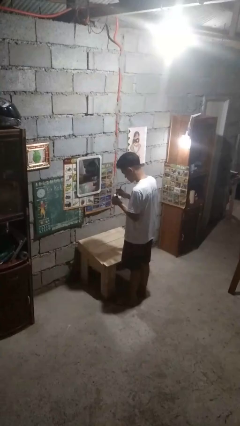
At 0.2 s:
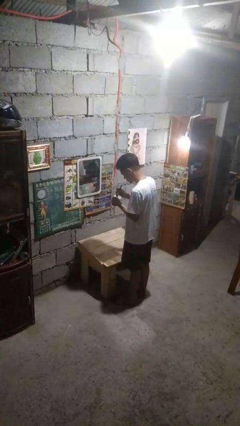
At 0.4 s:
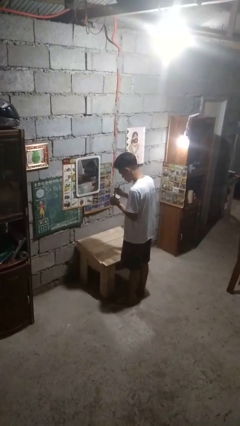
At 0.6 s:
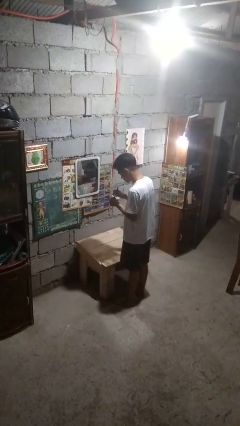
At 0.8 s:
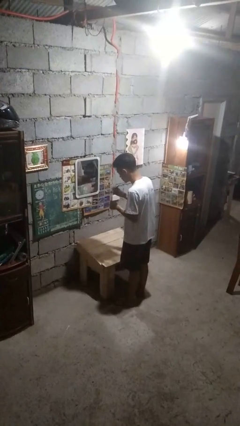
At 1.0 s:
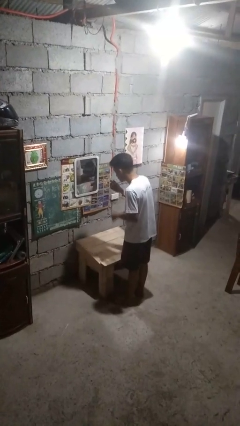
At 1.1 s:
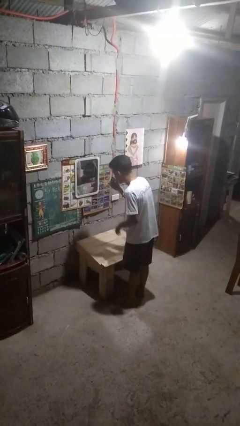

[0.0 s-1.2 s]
person applies foundation makeup

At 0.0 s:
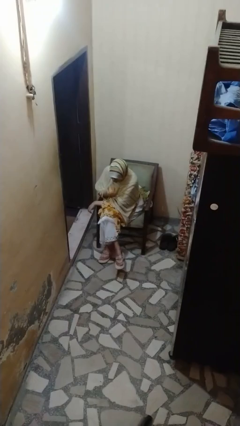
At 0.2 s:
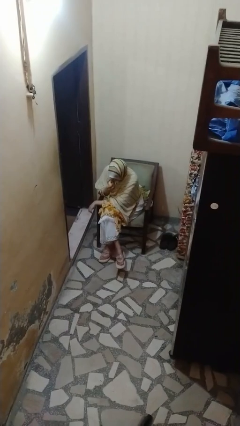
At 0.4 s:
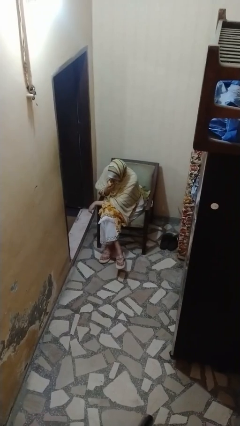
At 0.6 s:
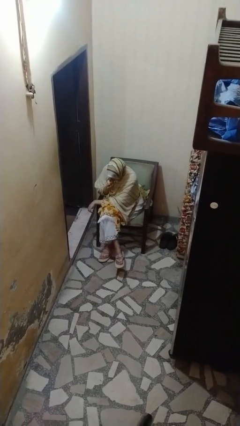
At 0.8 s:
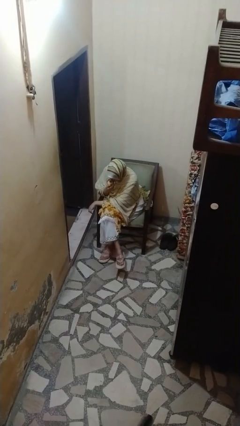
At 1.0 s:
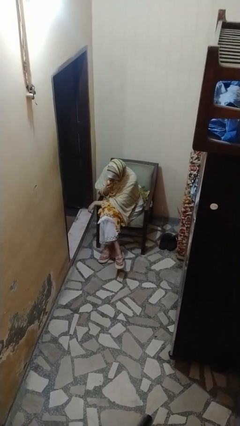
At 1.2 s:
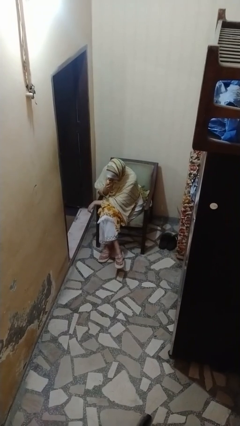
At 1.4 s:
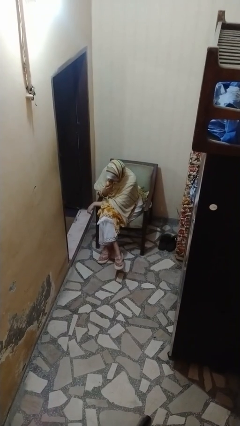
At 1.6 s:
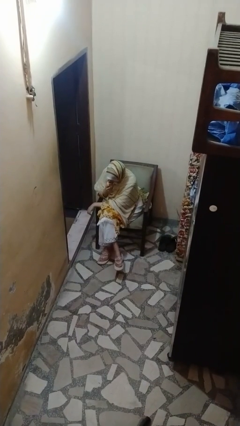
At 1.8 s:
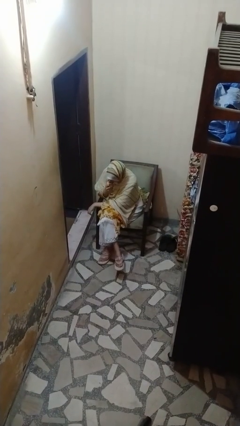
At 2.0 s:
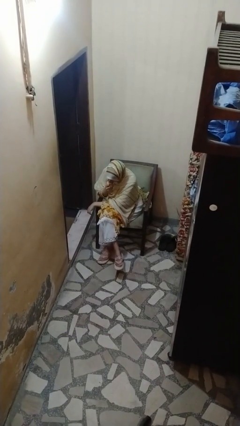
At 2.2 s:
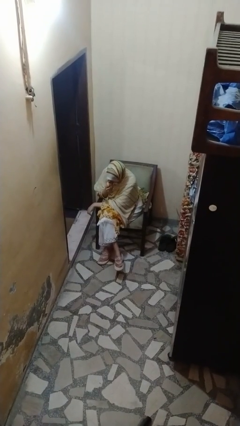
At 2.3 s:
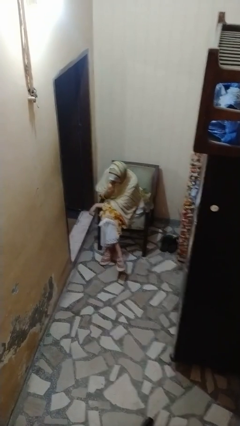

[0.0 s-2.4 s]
person eats apple

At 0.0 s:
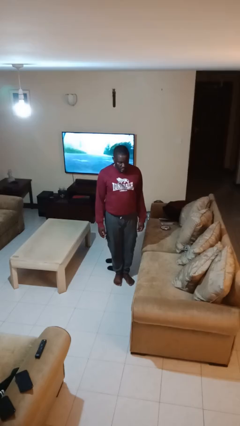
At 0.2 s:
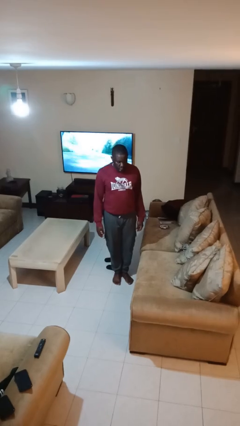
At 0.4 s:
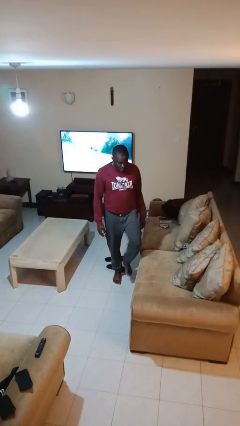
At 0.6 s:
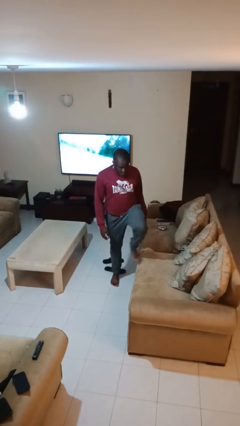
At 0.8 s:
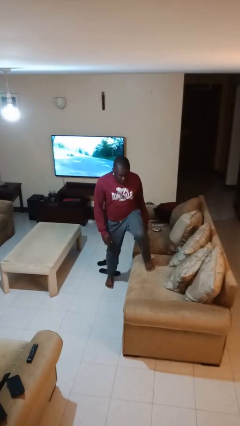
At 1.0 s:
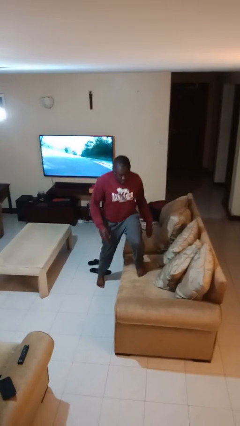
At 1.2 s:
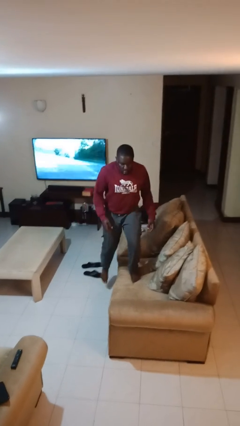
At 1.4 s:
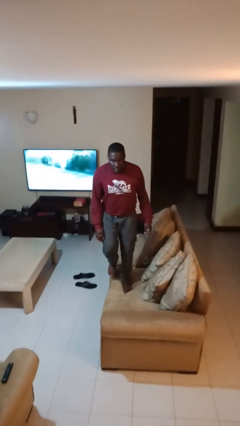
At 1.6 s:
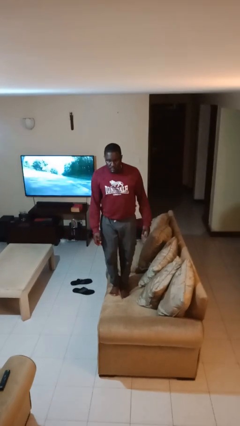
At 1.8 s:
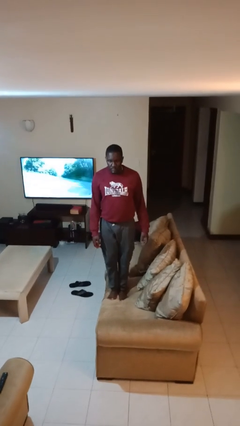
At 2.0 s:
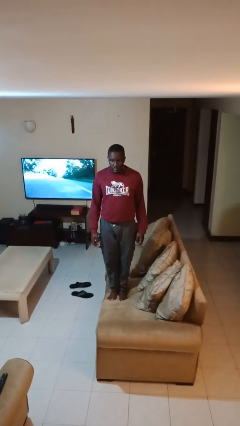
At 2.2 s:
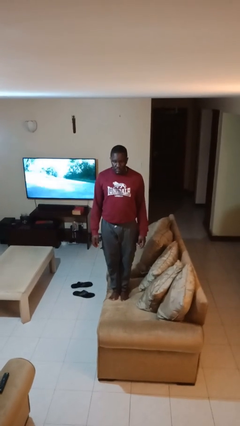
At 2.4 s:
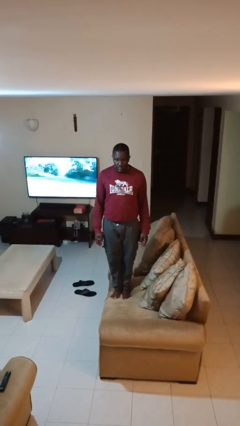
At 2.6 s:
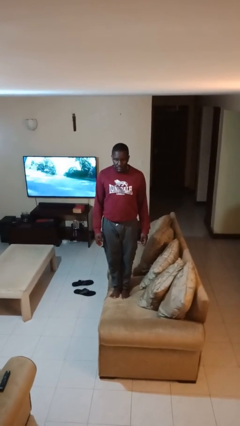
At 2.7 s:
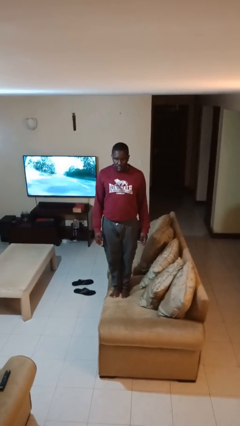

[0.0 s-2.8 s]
person climbs on couch

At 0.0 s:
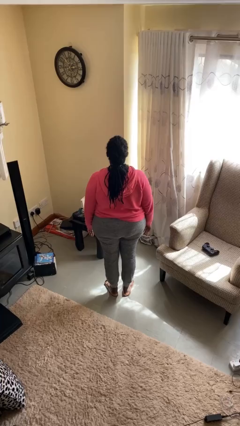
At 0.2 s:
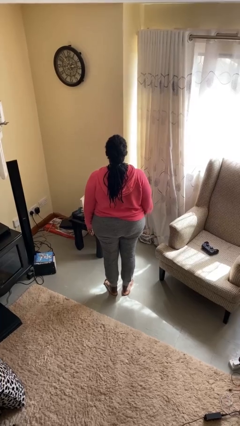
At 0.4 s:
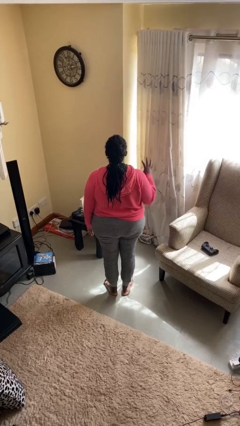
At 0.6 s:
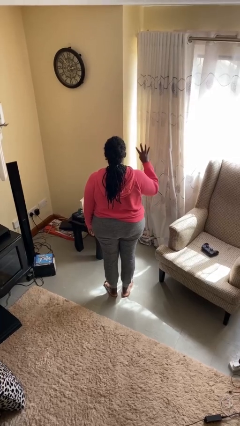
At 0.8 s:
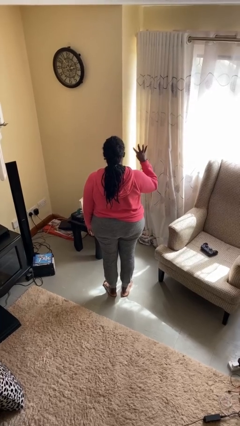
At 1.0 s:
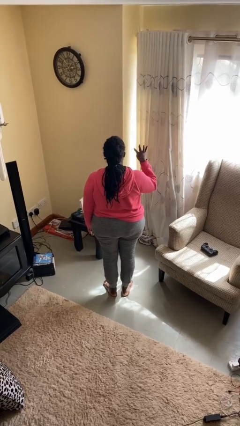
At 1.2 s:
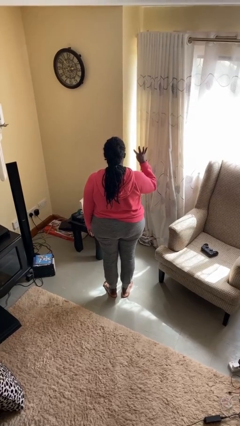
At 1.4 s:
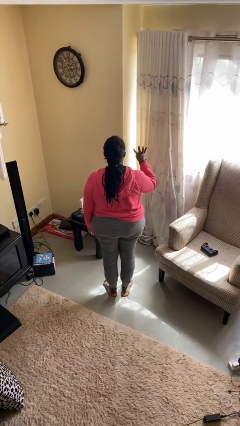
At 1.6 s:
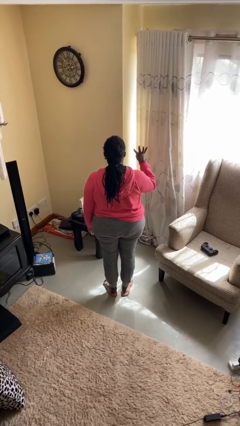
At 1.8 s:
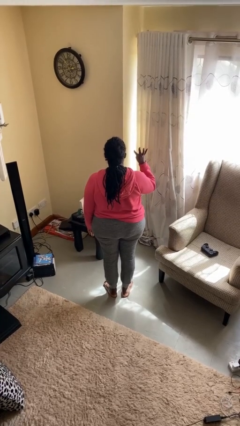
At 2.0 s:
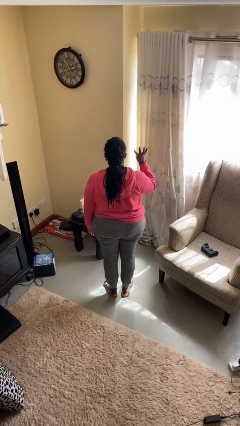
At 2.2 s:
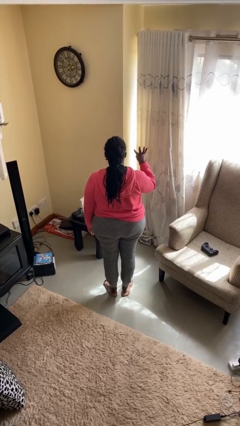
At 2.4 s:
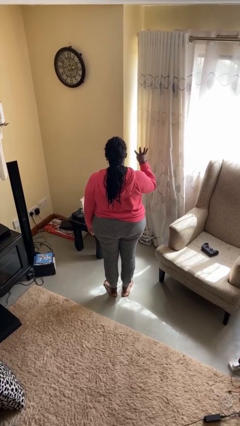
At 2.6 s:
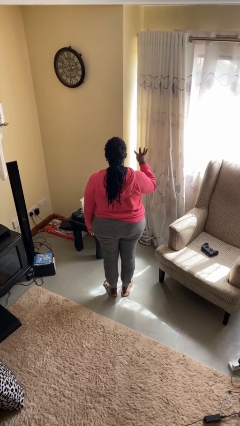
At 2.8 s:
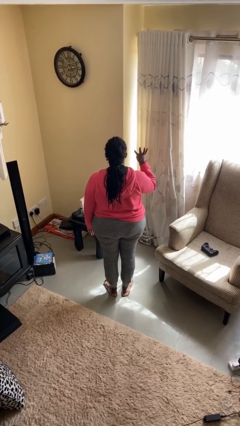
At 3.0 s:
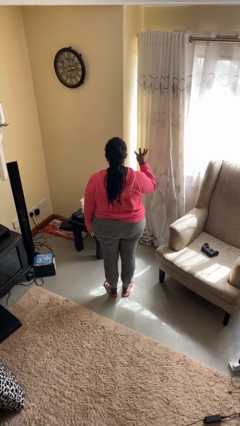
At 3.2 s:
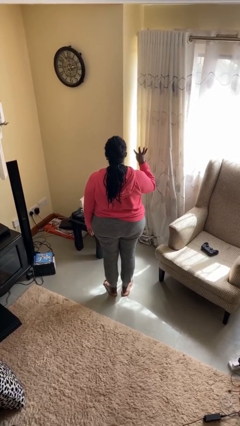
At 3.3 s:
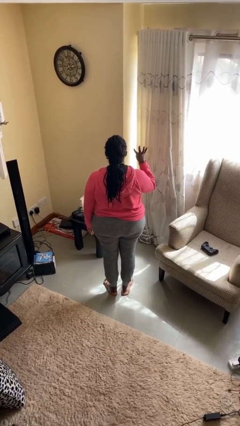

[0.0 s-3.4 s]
person gestures number four

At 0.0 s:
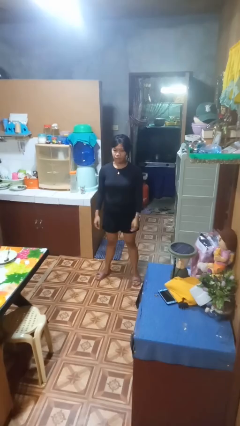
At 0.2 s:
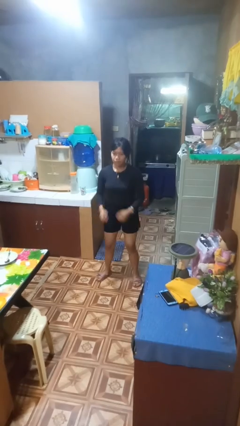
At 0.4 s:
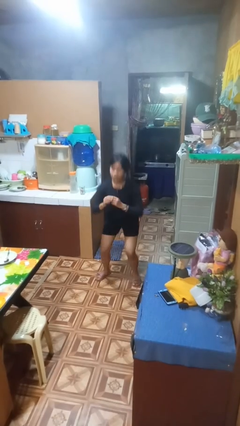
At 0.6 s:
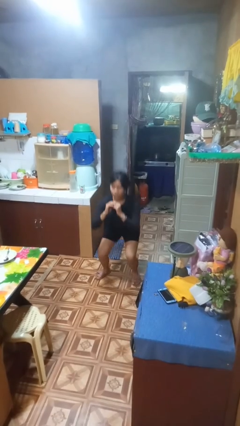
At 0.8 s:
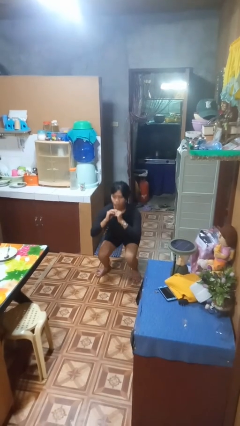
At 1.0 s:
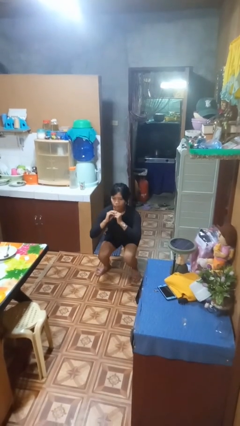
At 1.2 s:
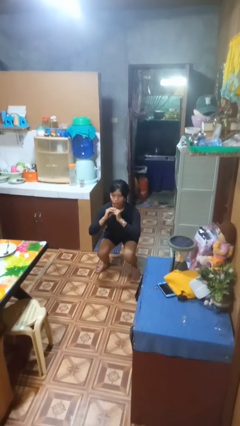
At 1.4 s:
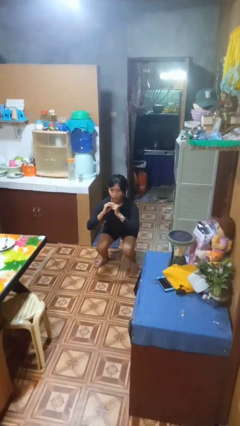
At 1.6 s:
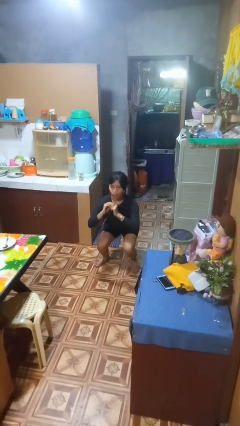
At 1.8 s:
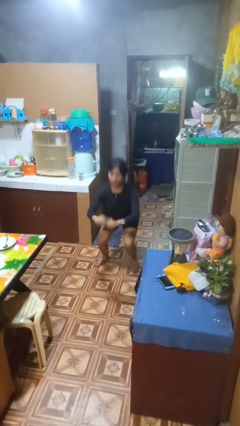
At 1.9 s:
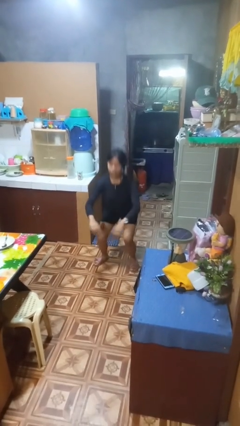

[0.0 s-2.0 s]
person squats

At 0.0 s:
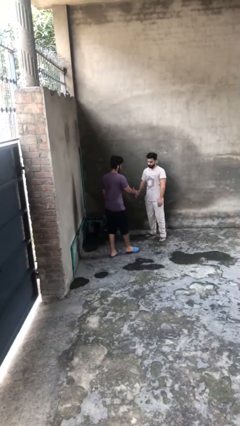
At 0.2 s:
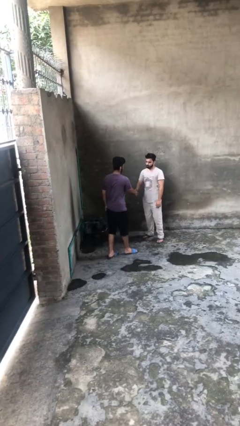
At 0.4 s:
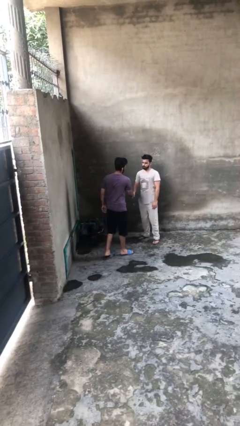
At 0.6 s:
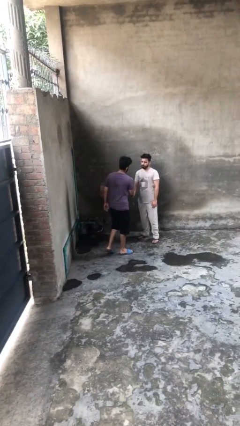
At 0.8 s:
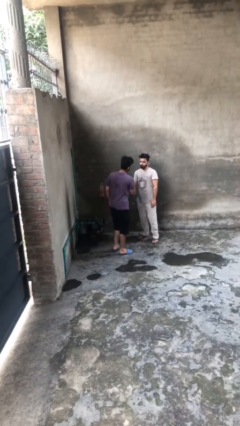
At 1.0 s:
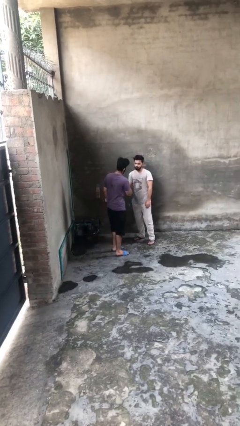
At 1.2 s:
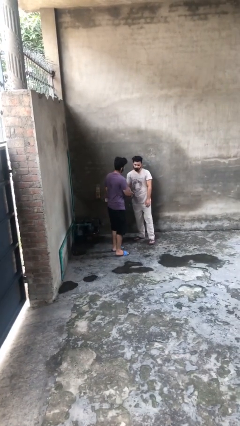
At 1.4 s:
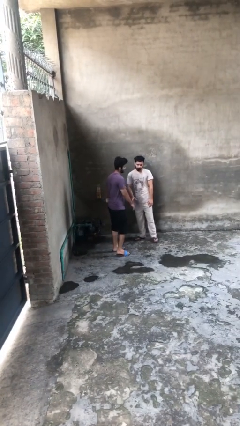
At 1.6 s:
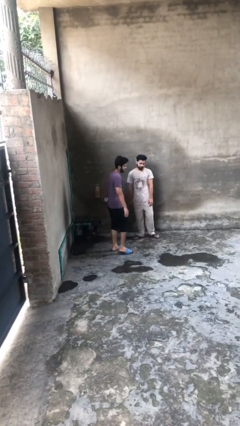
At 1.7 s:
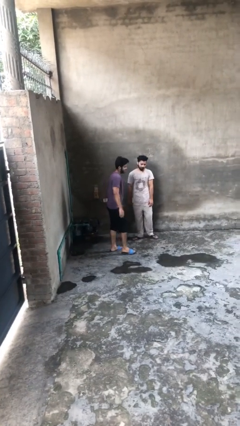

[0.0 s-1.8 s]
person shakes hand

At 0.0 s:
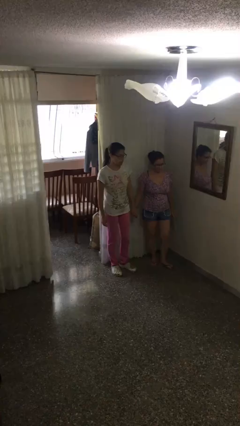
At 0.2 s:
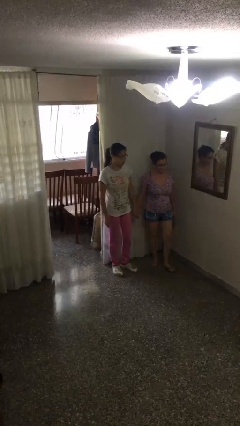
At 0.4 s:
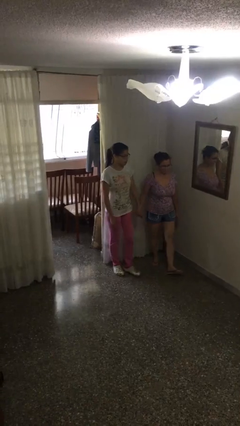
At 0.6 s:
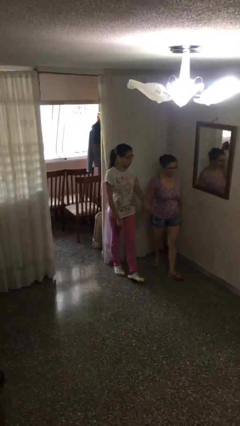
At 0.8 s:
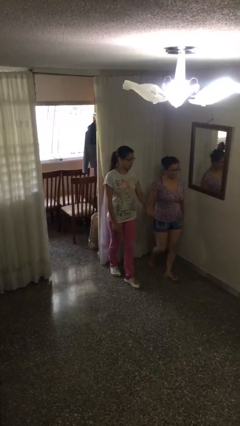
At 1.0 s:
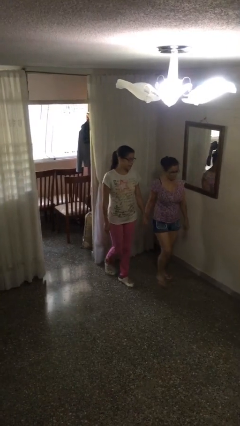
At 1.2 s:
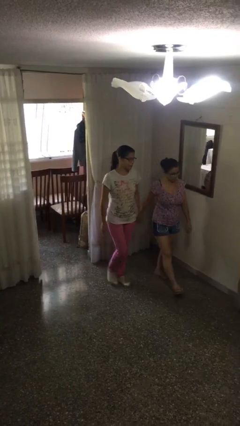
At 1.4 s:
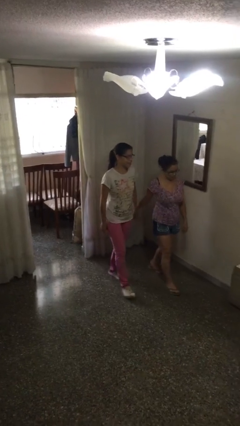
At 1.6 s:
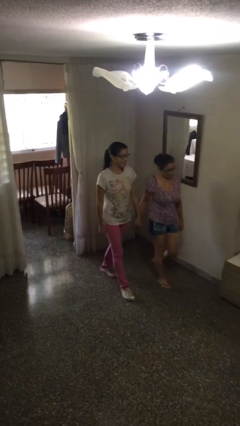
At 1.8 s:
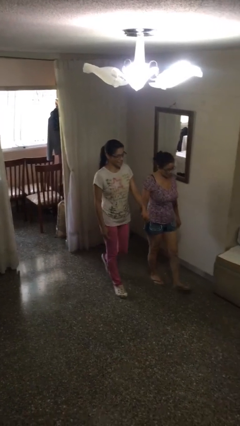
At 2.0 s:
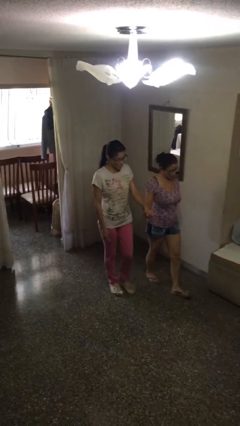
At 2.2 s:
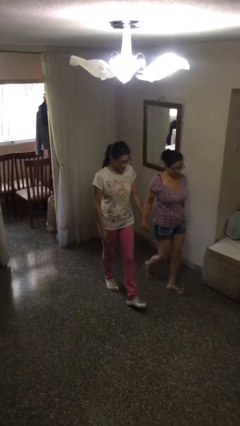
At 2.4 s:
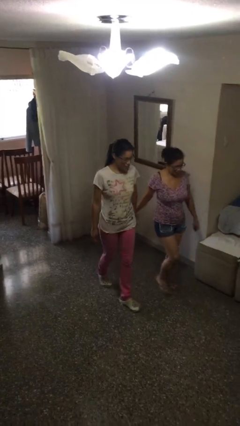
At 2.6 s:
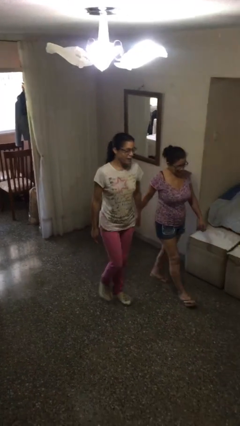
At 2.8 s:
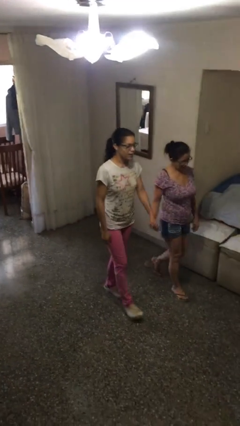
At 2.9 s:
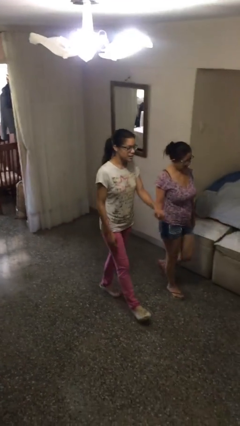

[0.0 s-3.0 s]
person holds hand

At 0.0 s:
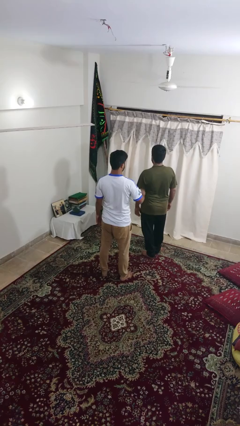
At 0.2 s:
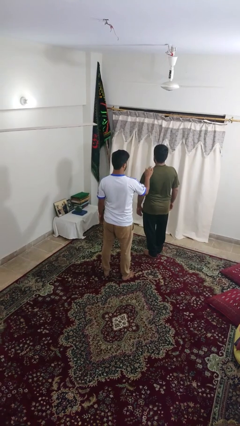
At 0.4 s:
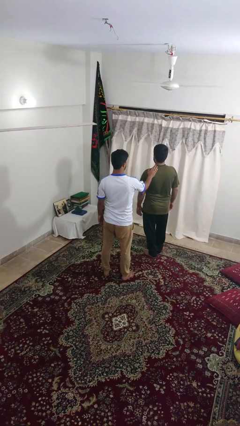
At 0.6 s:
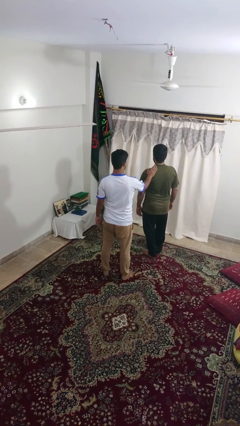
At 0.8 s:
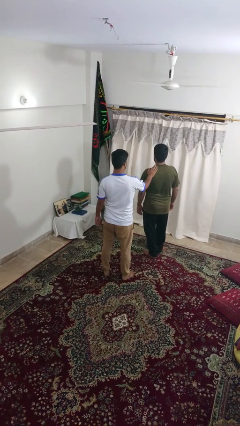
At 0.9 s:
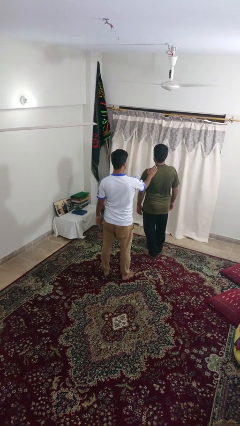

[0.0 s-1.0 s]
person touches back of person
